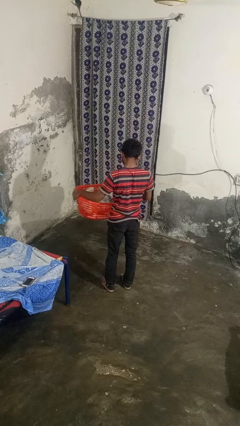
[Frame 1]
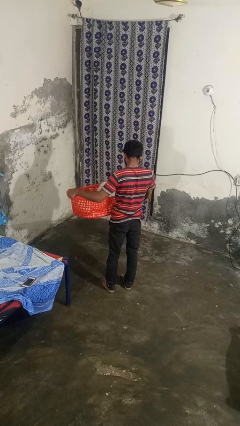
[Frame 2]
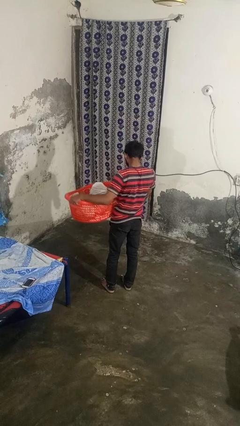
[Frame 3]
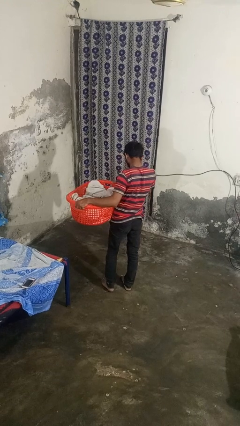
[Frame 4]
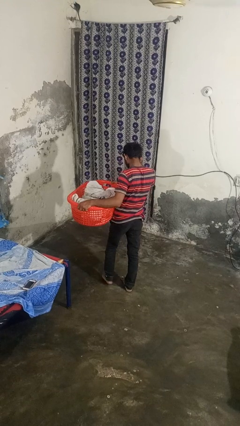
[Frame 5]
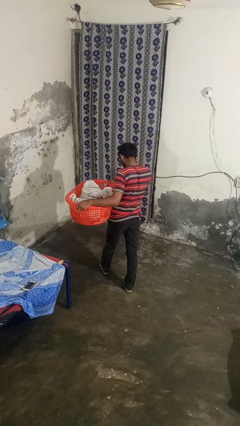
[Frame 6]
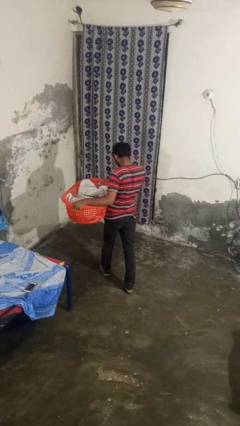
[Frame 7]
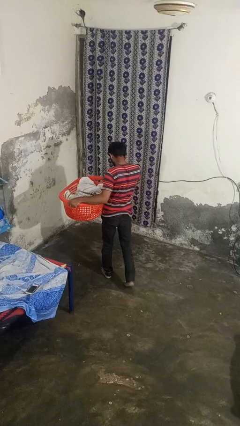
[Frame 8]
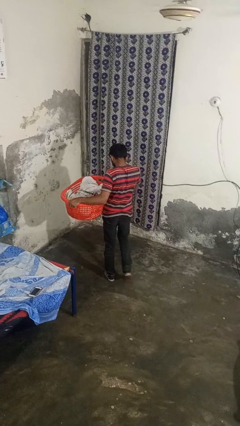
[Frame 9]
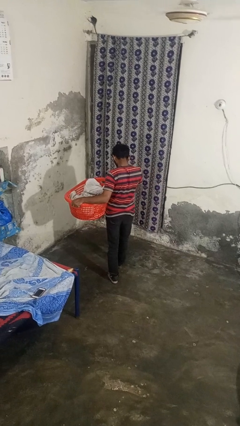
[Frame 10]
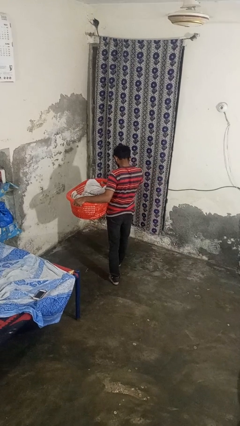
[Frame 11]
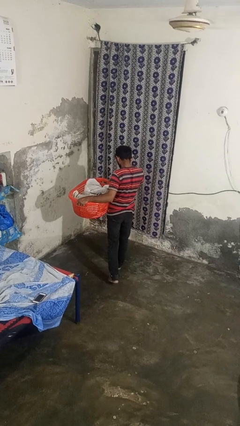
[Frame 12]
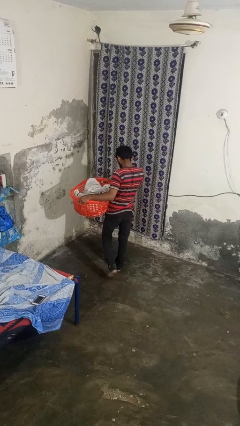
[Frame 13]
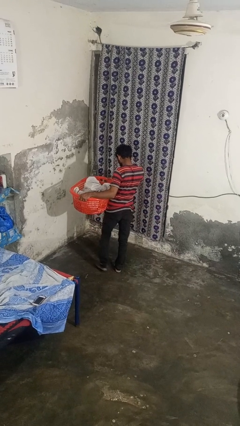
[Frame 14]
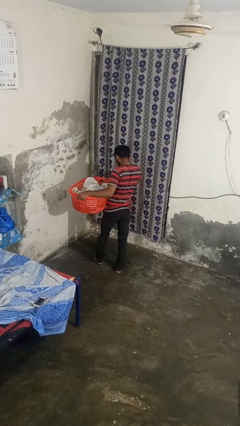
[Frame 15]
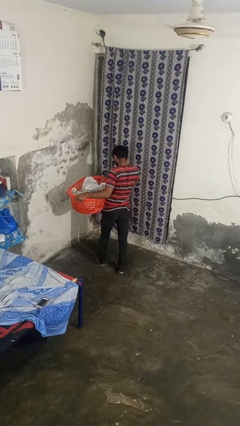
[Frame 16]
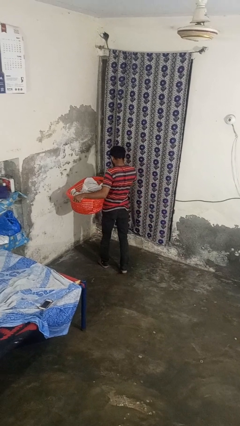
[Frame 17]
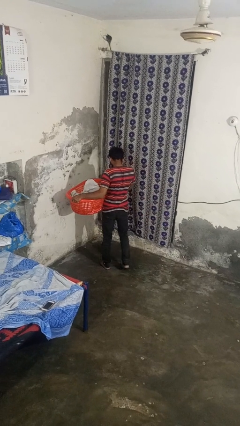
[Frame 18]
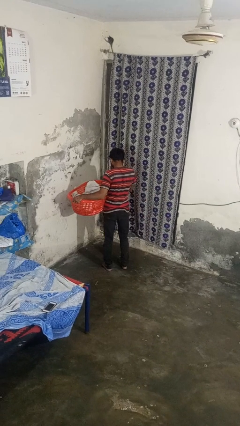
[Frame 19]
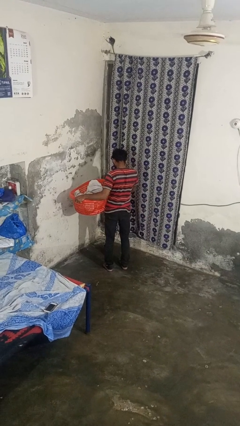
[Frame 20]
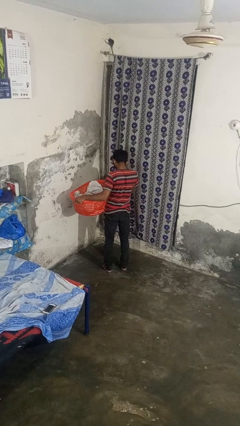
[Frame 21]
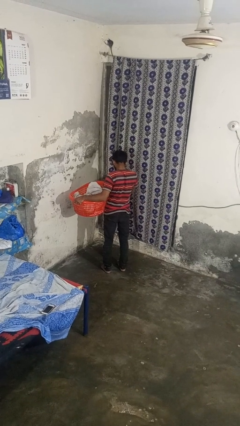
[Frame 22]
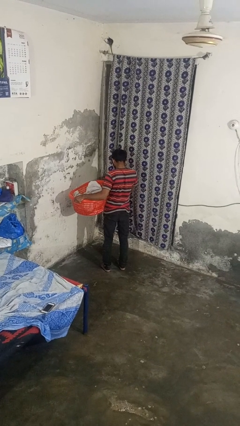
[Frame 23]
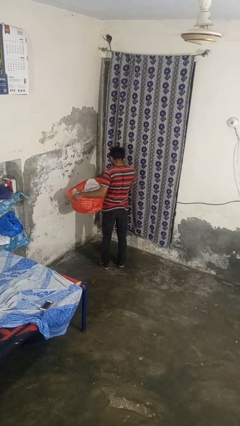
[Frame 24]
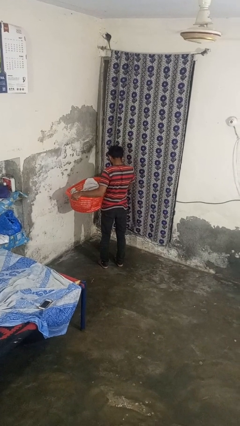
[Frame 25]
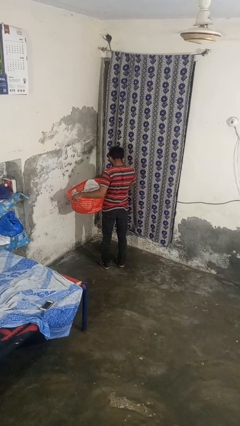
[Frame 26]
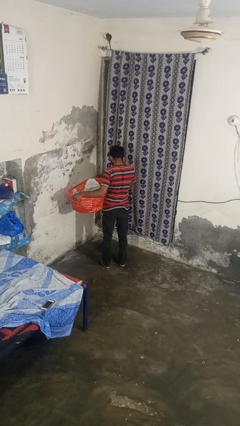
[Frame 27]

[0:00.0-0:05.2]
person carries laundry basket

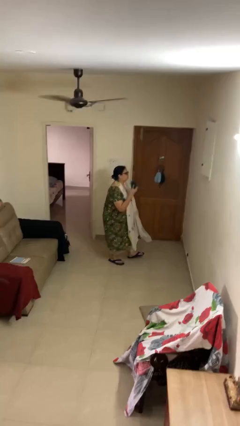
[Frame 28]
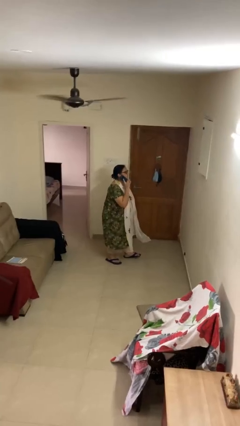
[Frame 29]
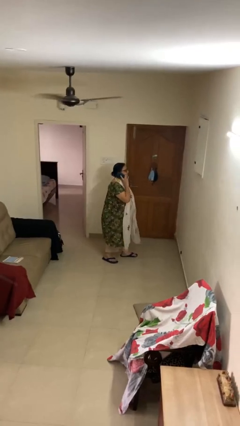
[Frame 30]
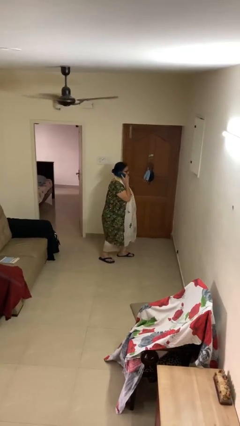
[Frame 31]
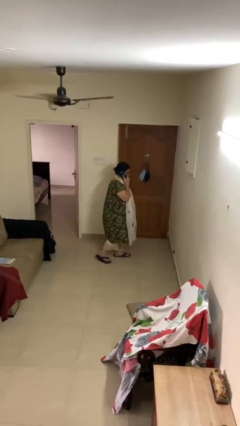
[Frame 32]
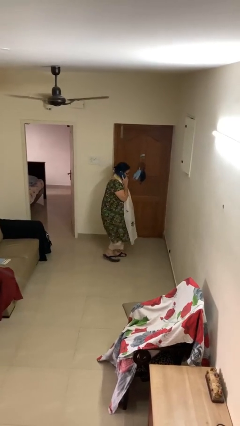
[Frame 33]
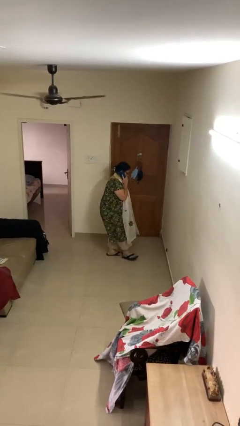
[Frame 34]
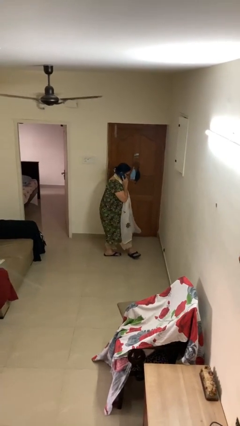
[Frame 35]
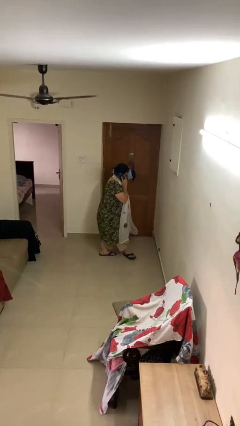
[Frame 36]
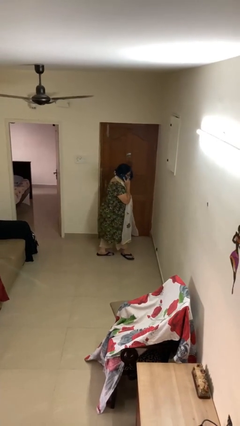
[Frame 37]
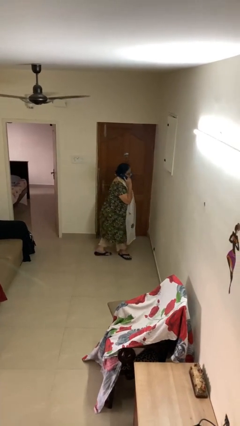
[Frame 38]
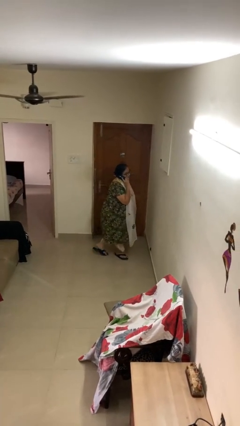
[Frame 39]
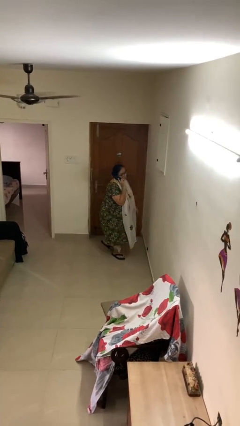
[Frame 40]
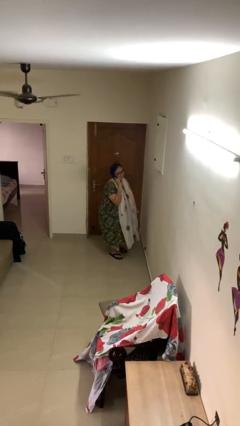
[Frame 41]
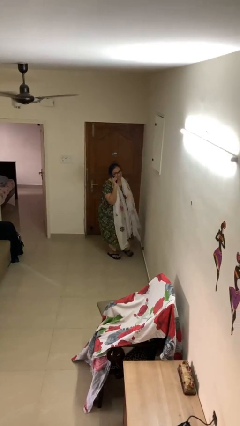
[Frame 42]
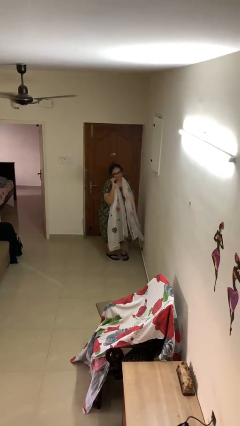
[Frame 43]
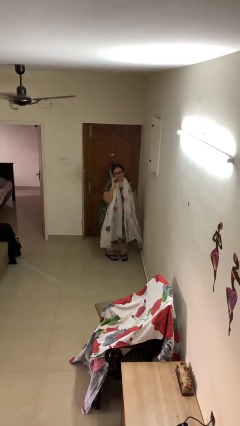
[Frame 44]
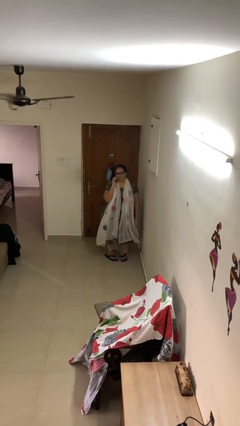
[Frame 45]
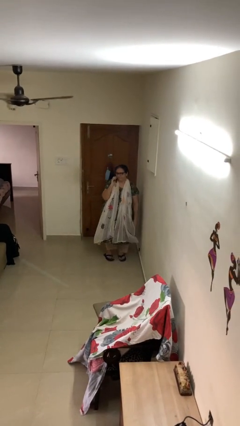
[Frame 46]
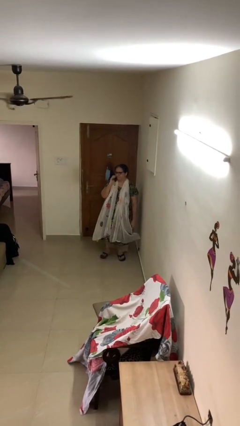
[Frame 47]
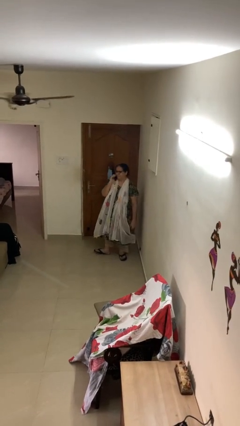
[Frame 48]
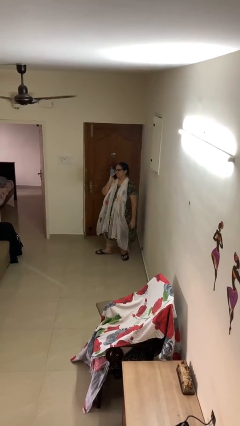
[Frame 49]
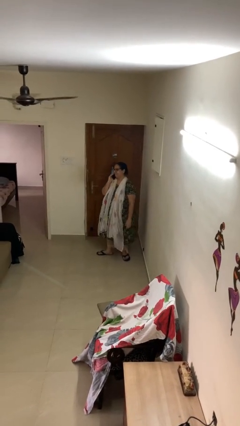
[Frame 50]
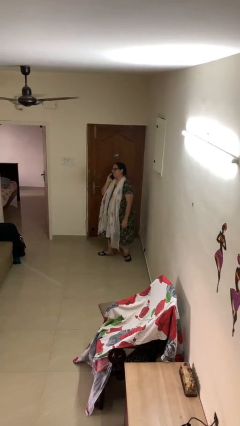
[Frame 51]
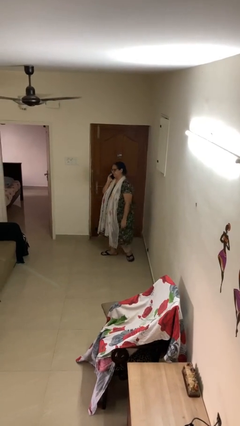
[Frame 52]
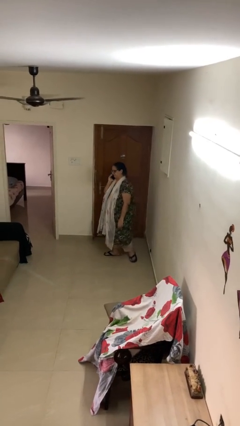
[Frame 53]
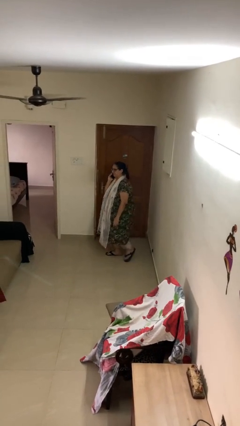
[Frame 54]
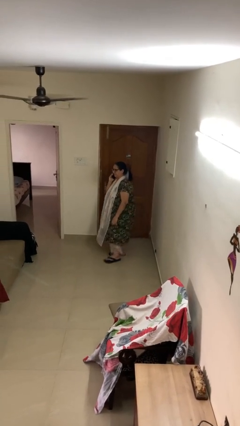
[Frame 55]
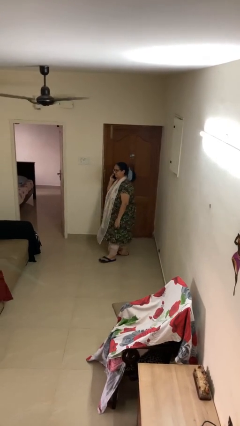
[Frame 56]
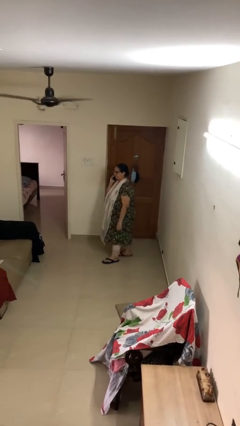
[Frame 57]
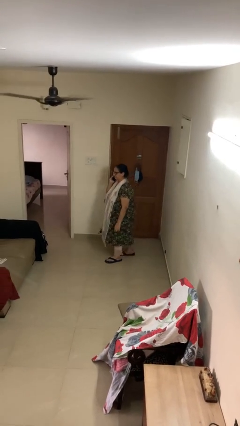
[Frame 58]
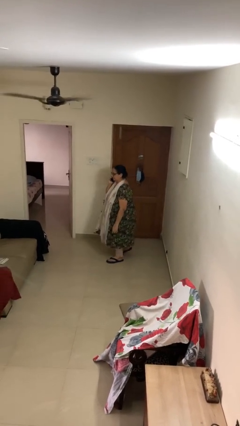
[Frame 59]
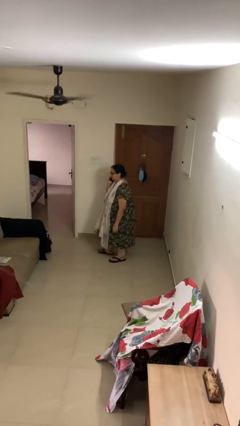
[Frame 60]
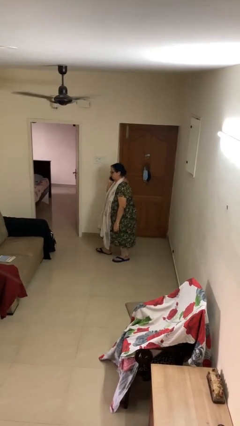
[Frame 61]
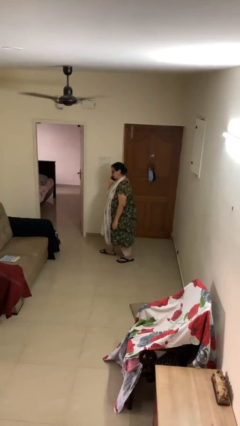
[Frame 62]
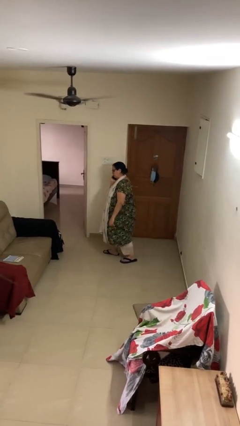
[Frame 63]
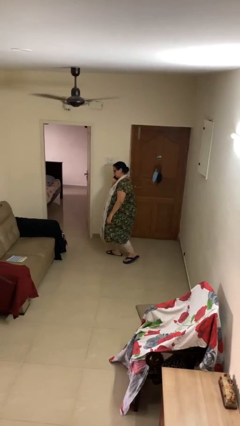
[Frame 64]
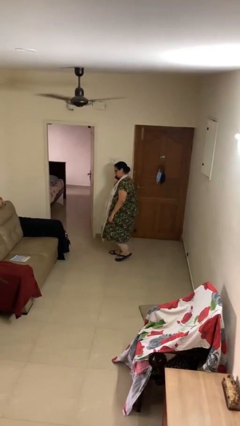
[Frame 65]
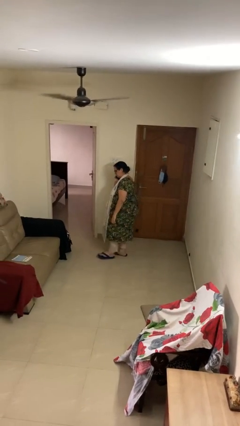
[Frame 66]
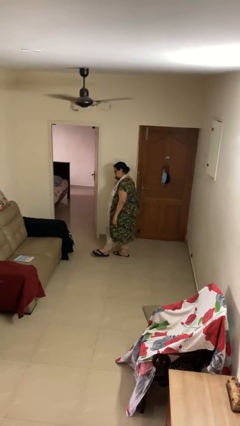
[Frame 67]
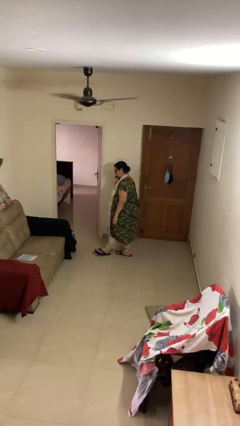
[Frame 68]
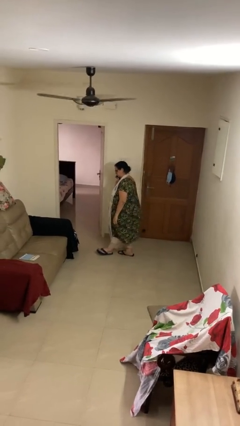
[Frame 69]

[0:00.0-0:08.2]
person talks on phone

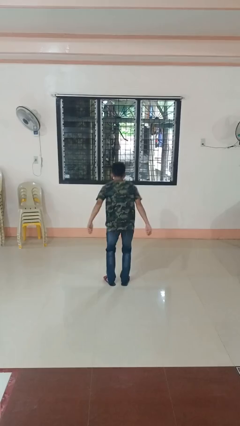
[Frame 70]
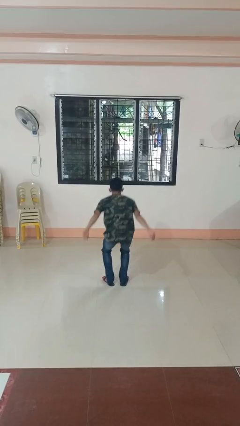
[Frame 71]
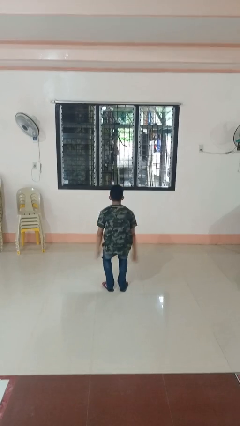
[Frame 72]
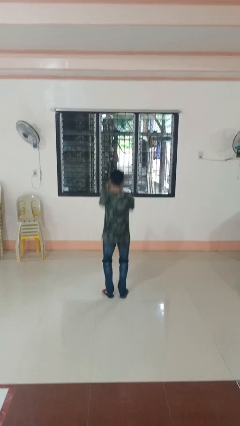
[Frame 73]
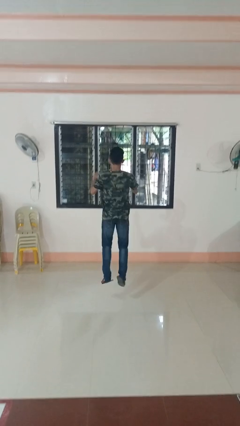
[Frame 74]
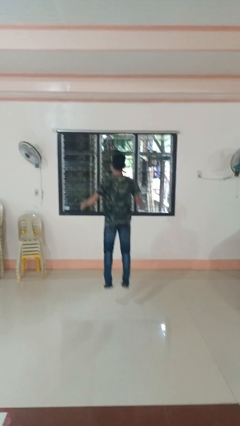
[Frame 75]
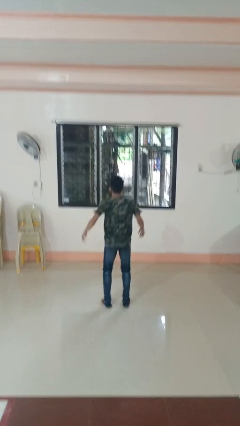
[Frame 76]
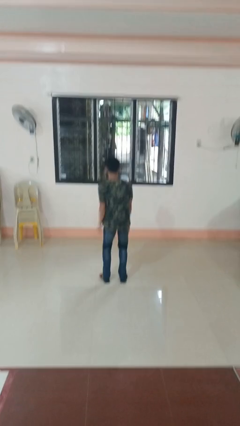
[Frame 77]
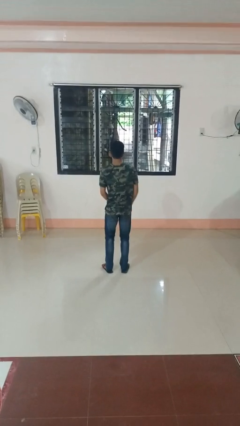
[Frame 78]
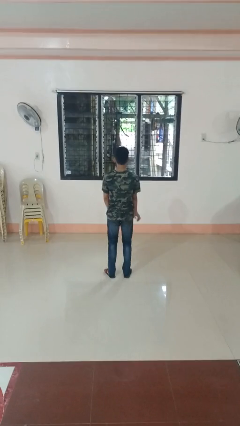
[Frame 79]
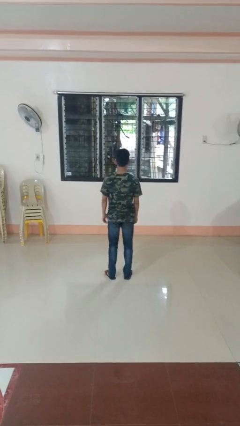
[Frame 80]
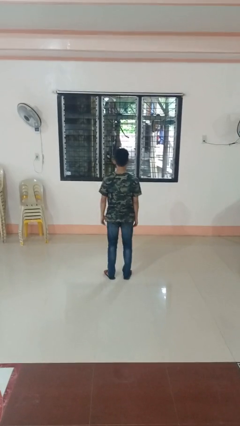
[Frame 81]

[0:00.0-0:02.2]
person jumps

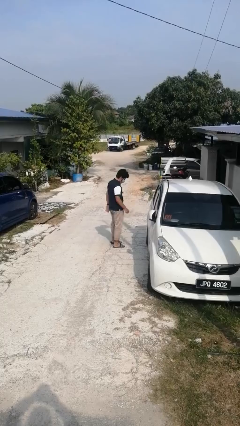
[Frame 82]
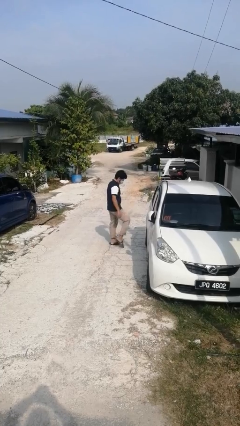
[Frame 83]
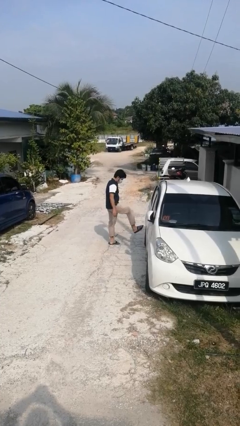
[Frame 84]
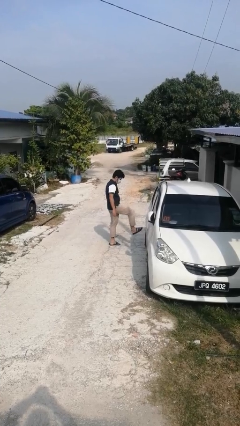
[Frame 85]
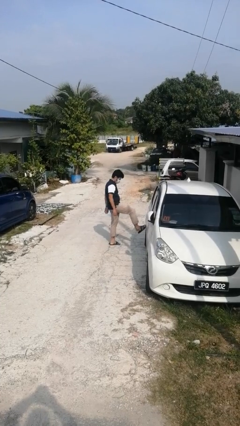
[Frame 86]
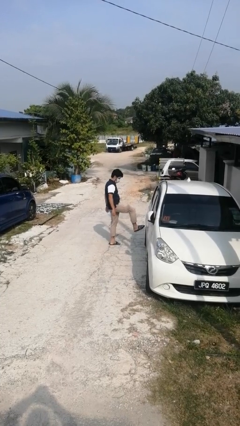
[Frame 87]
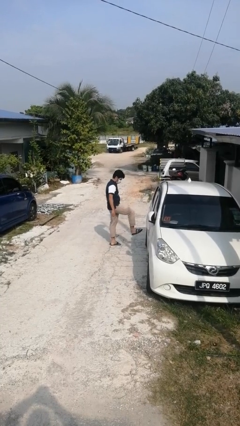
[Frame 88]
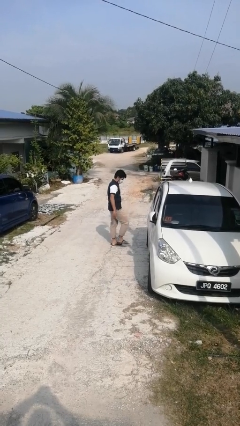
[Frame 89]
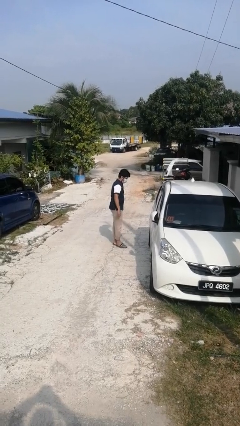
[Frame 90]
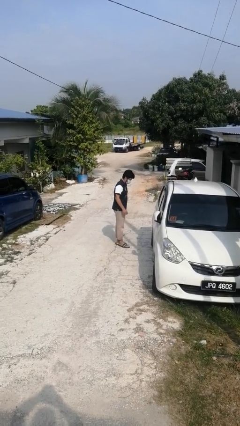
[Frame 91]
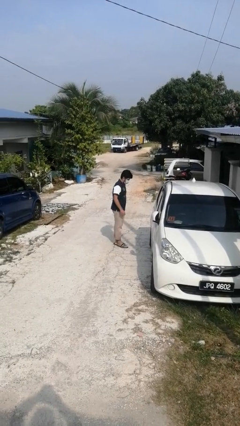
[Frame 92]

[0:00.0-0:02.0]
person kicks car tires
